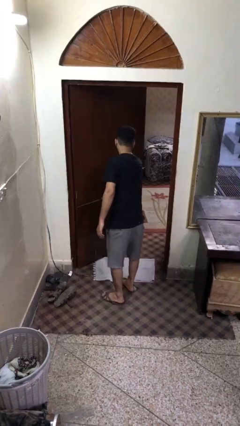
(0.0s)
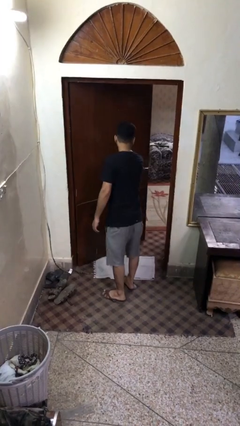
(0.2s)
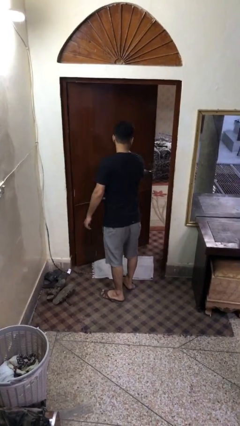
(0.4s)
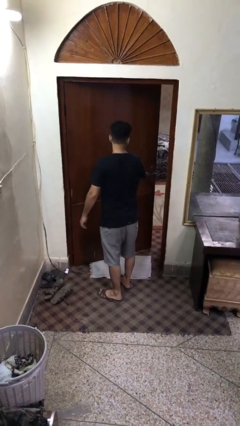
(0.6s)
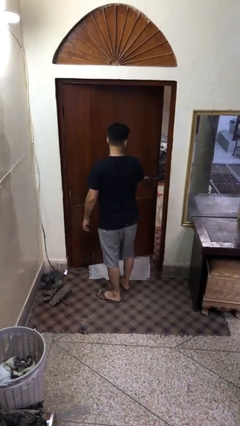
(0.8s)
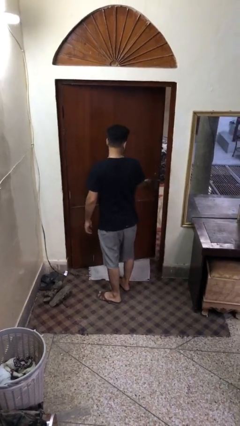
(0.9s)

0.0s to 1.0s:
person closes facility door

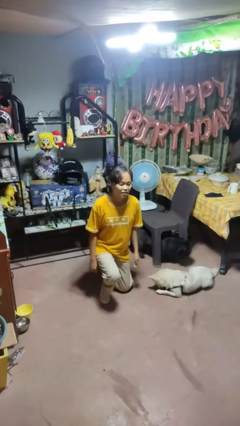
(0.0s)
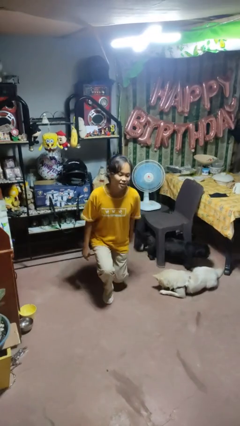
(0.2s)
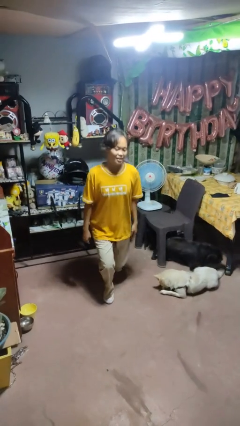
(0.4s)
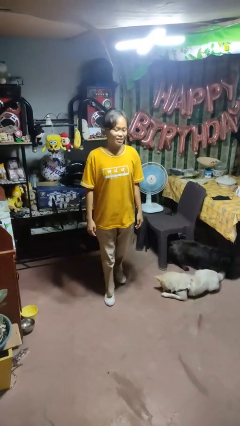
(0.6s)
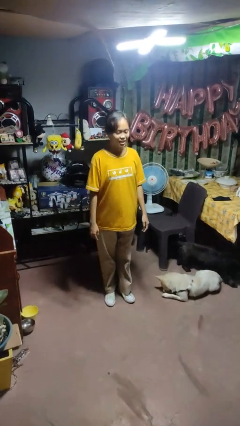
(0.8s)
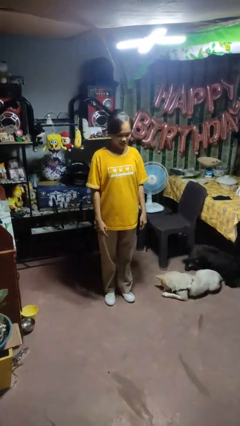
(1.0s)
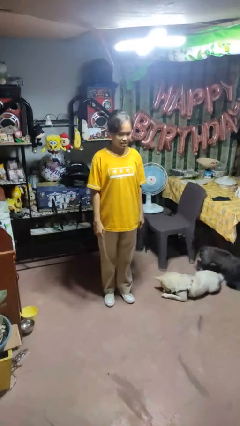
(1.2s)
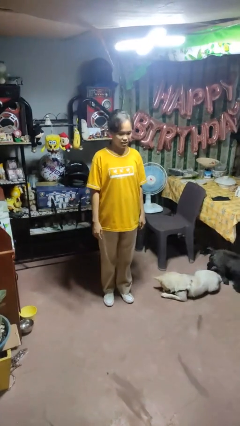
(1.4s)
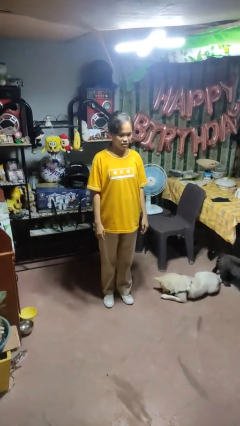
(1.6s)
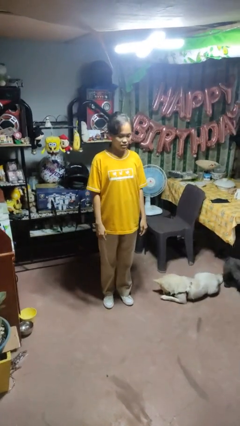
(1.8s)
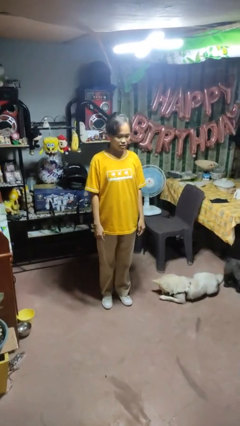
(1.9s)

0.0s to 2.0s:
person stands up from floor

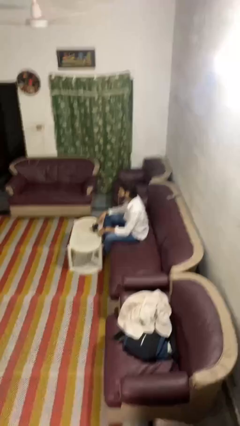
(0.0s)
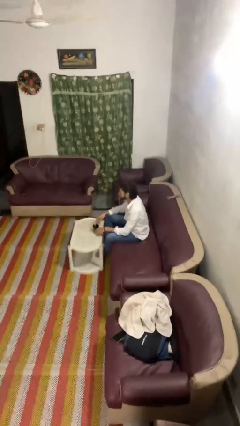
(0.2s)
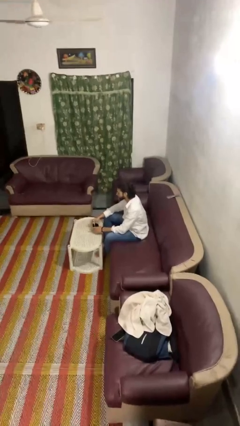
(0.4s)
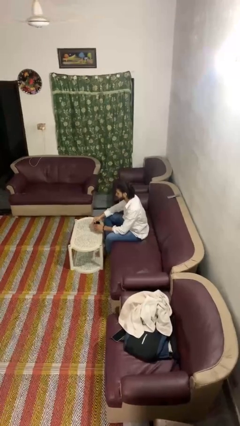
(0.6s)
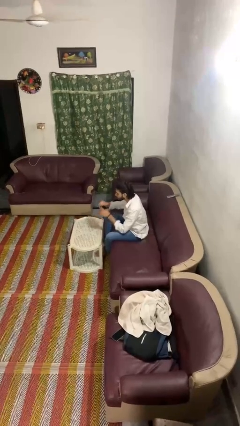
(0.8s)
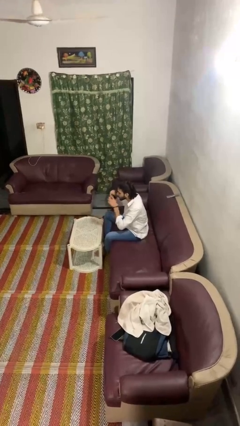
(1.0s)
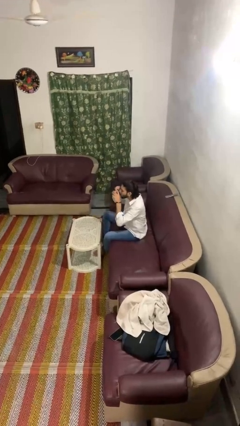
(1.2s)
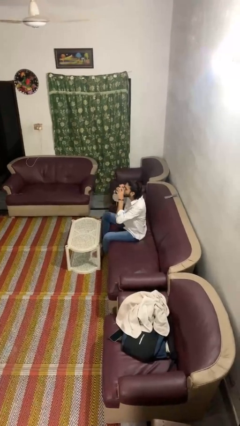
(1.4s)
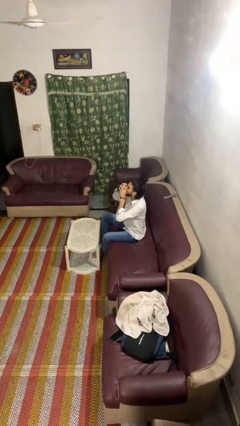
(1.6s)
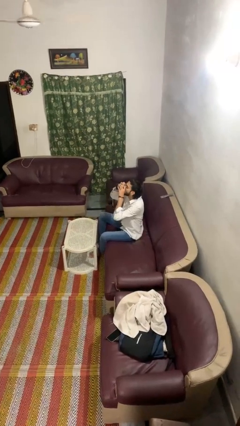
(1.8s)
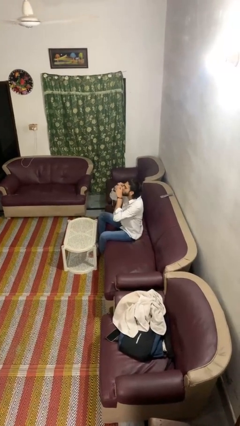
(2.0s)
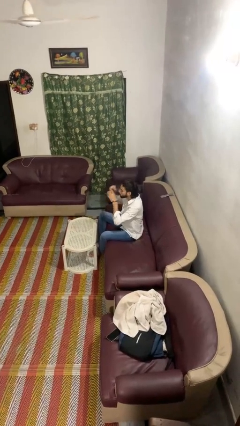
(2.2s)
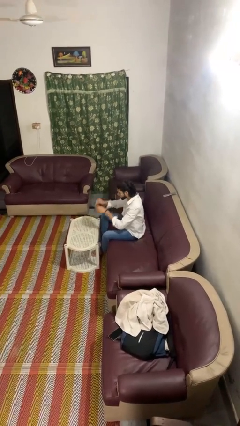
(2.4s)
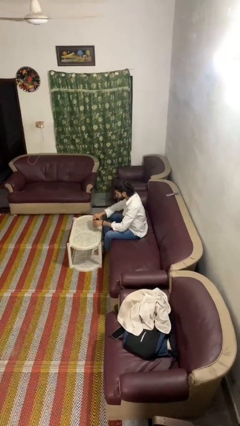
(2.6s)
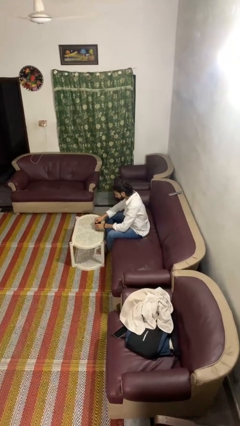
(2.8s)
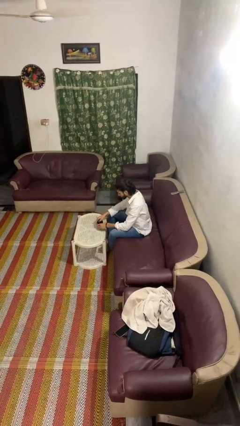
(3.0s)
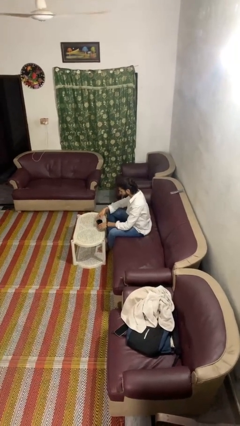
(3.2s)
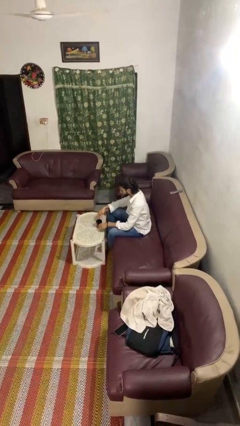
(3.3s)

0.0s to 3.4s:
person drinks from mug

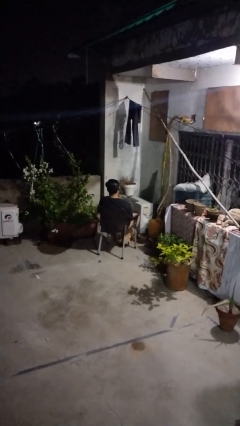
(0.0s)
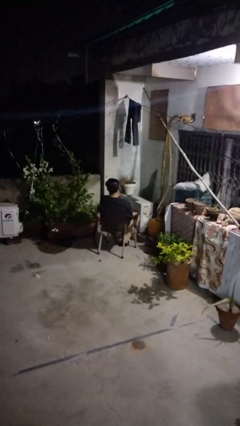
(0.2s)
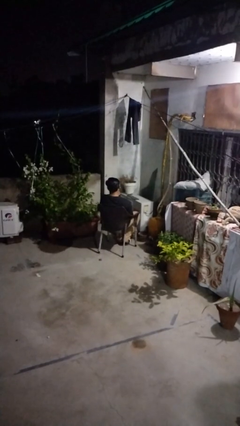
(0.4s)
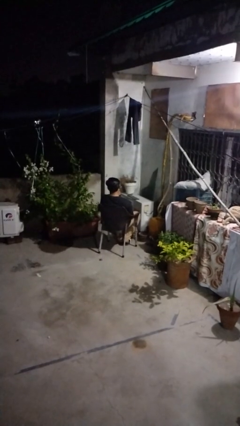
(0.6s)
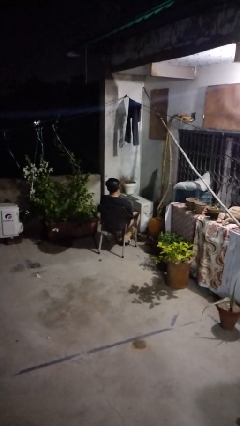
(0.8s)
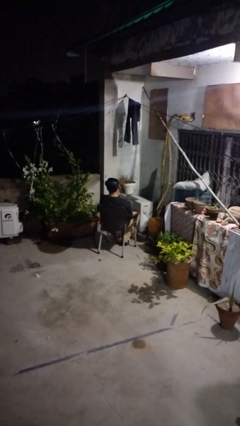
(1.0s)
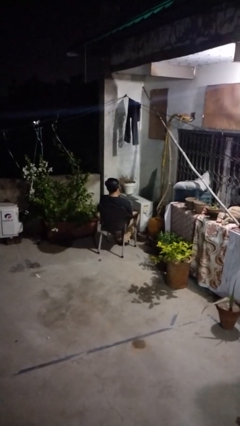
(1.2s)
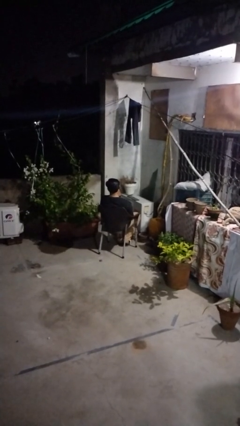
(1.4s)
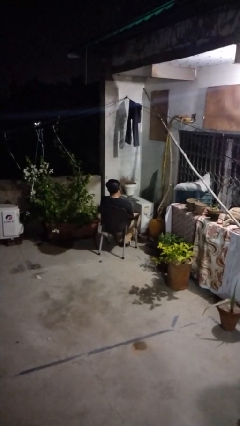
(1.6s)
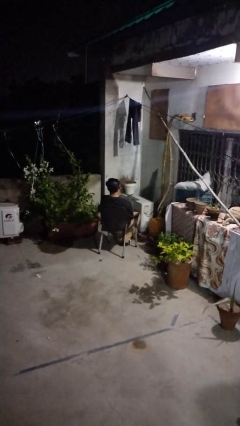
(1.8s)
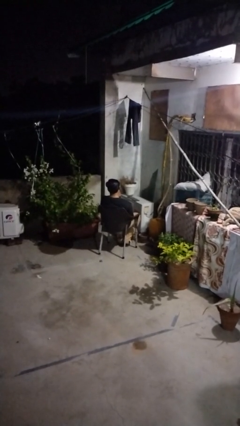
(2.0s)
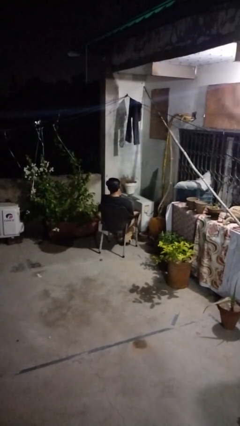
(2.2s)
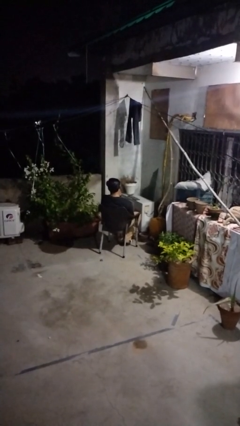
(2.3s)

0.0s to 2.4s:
person strokes chin

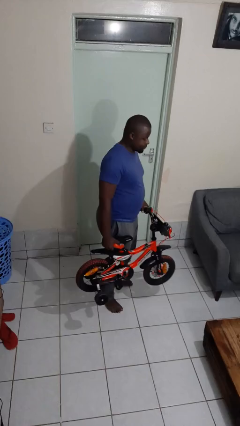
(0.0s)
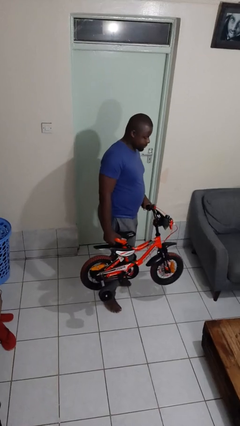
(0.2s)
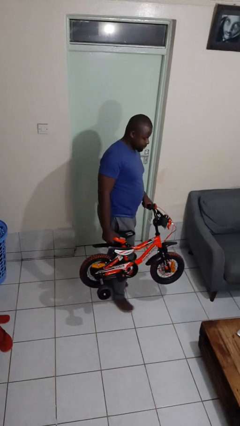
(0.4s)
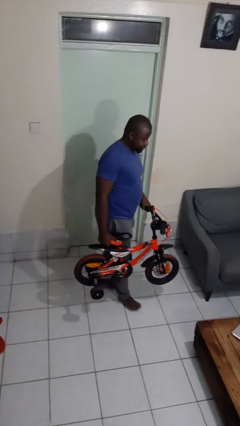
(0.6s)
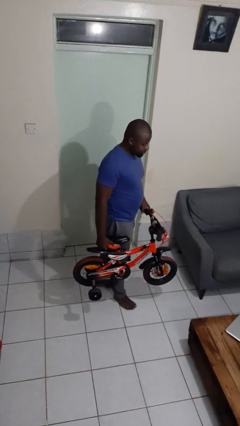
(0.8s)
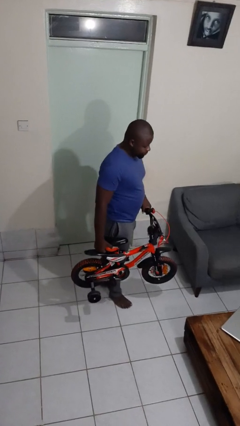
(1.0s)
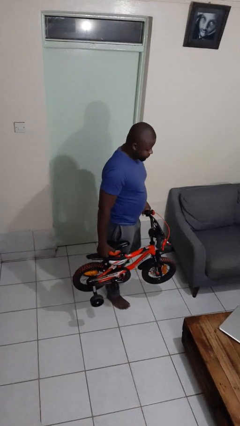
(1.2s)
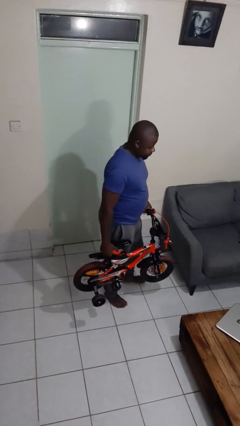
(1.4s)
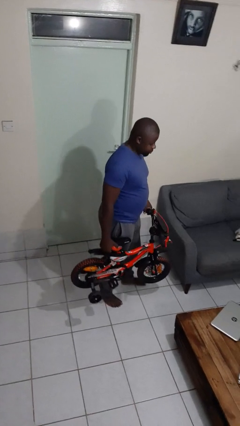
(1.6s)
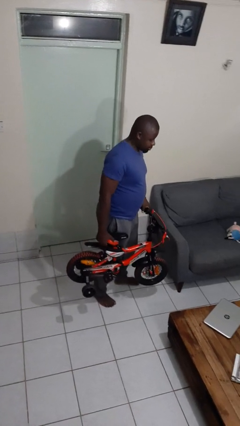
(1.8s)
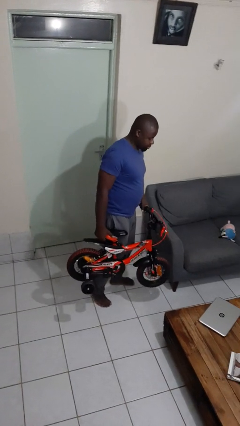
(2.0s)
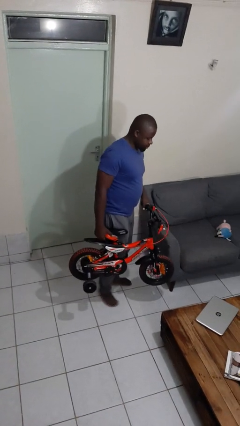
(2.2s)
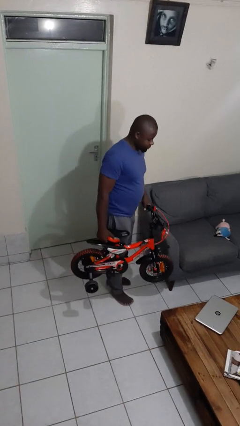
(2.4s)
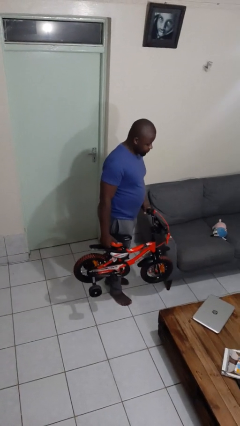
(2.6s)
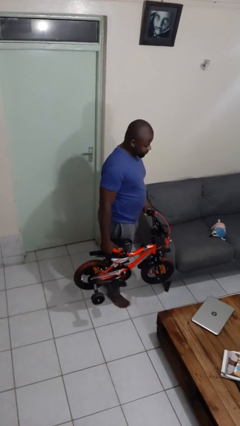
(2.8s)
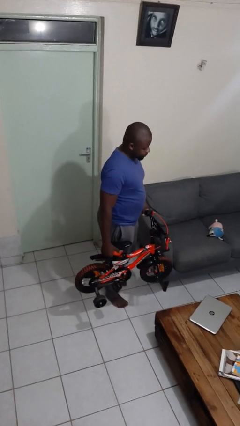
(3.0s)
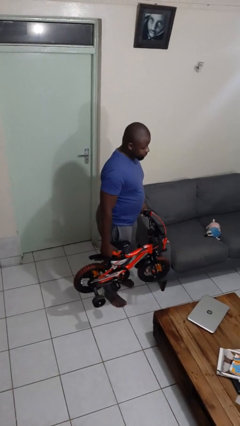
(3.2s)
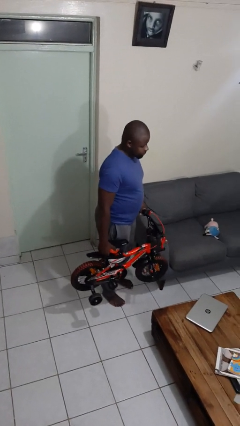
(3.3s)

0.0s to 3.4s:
person carries bicycle

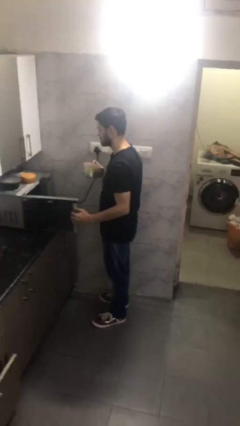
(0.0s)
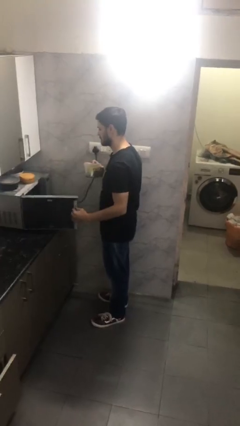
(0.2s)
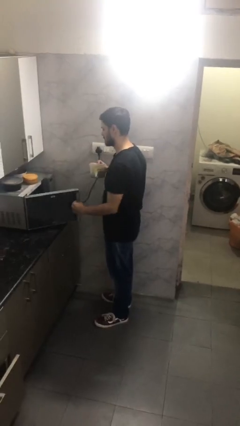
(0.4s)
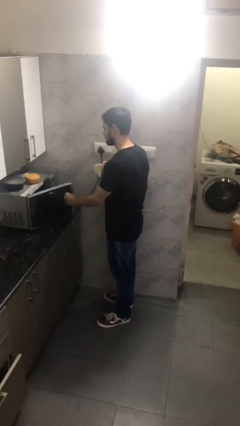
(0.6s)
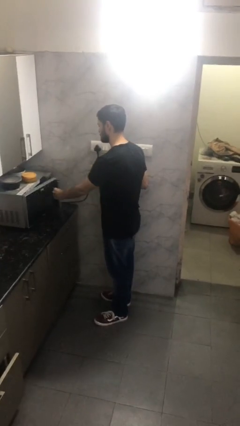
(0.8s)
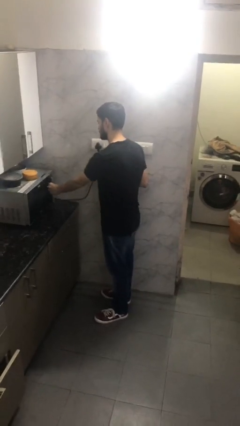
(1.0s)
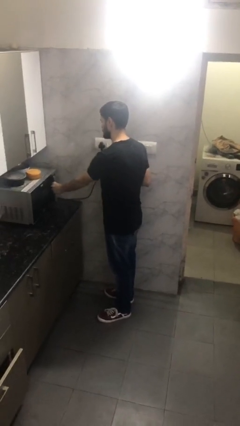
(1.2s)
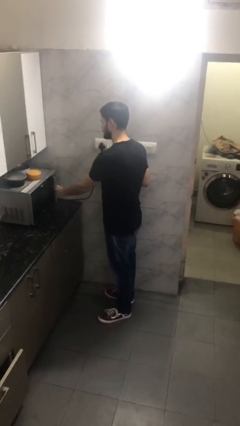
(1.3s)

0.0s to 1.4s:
person closes microwave

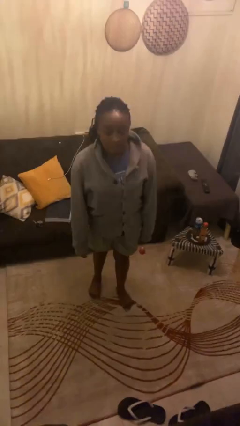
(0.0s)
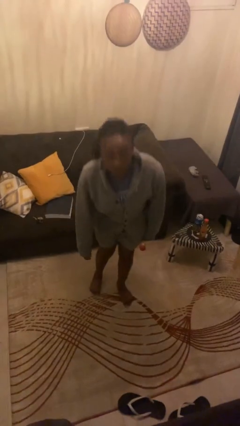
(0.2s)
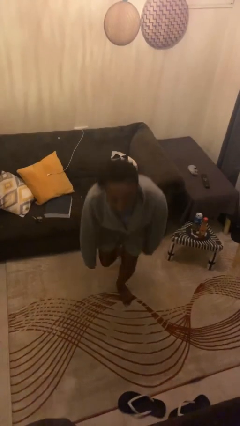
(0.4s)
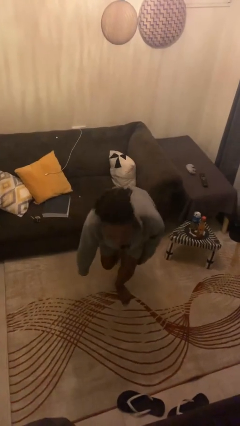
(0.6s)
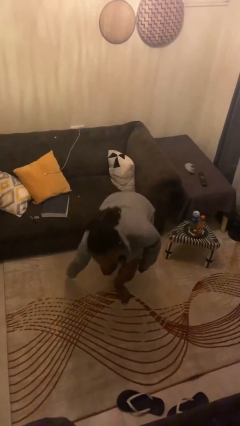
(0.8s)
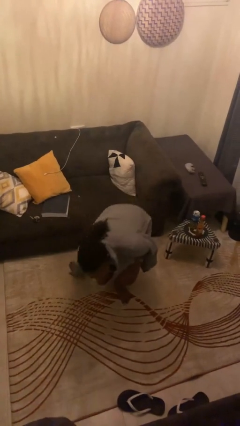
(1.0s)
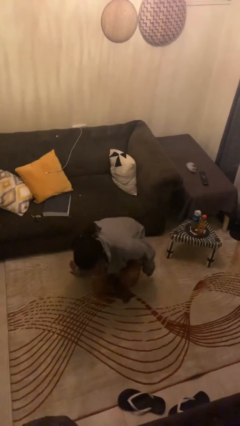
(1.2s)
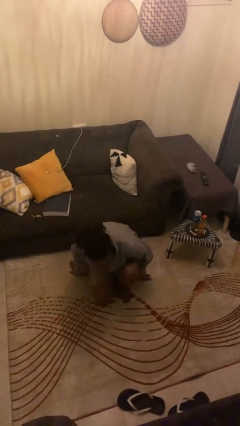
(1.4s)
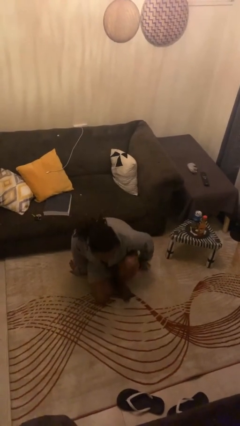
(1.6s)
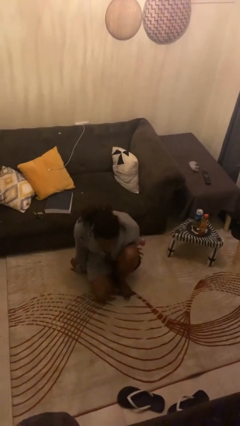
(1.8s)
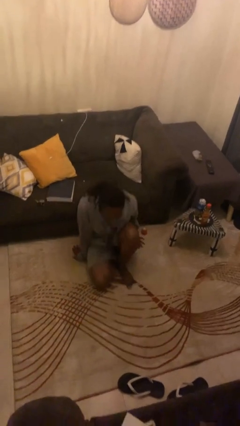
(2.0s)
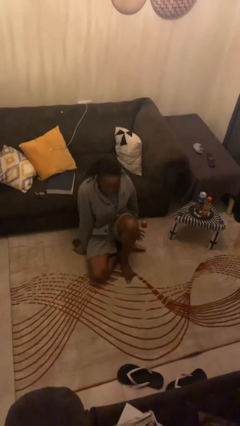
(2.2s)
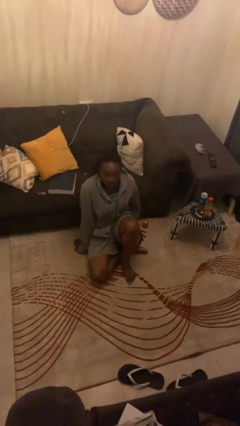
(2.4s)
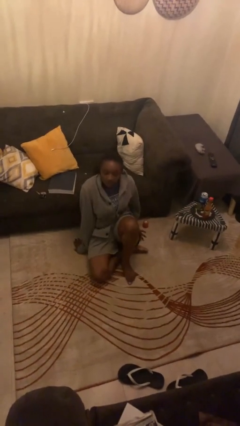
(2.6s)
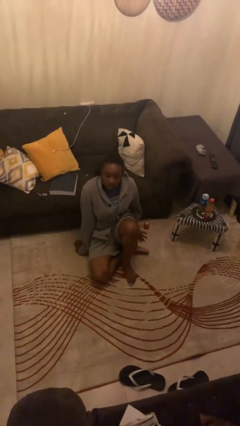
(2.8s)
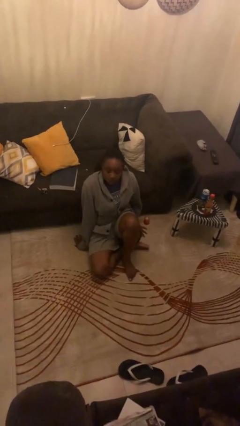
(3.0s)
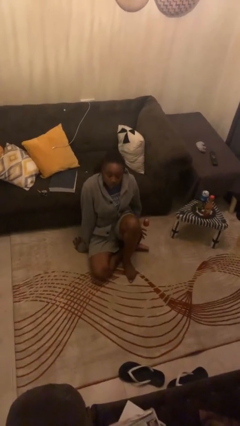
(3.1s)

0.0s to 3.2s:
person sits crisscross

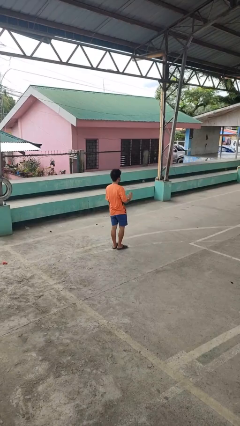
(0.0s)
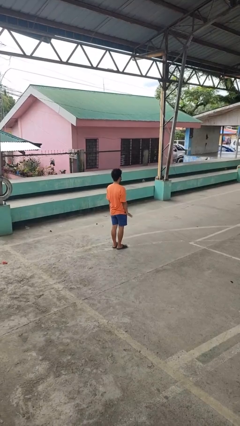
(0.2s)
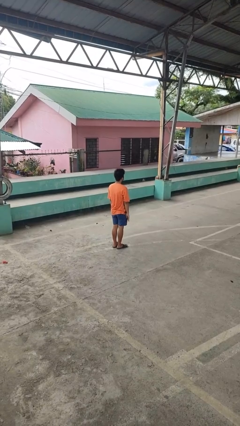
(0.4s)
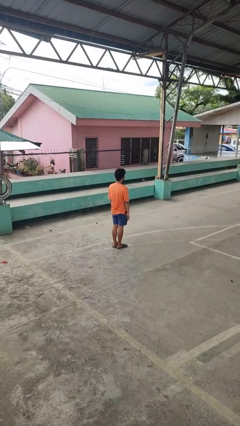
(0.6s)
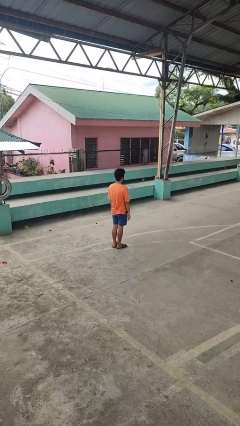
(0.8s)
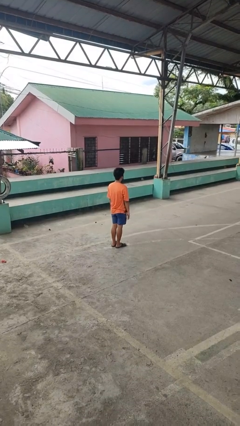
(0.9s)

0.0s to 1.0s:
person gestures lower hand
